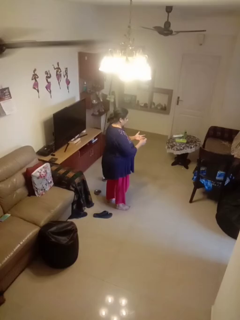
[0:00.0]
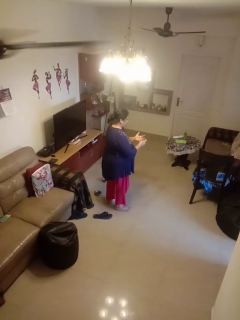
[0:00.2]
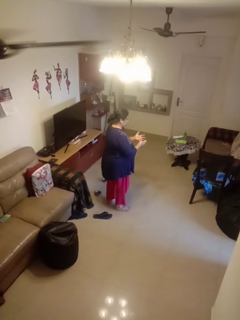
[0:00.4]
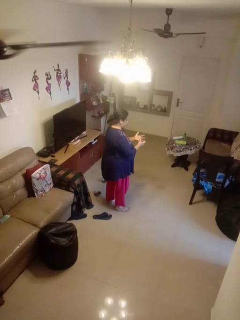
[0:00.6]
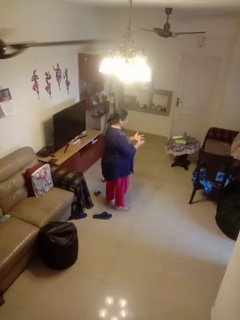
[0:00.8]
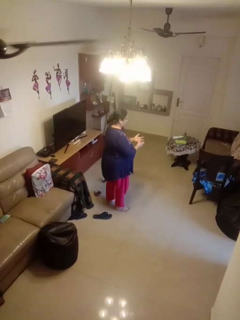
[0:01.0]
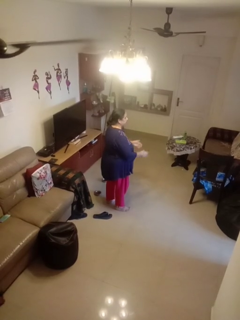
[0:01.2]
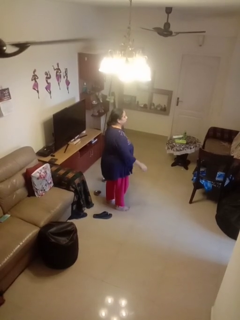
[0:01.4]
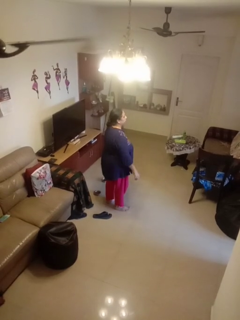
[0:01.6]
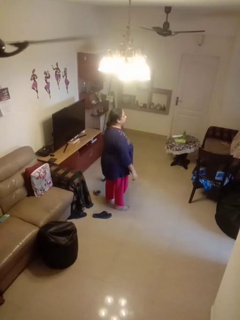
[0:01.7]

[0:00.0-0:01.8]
person puts on ring

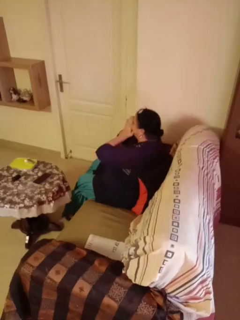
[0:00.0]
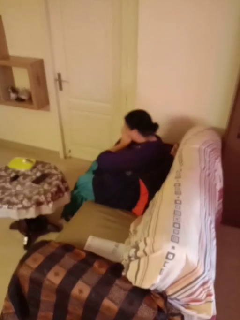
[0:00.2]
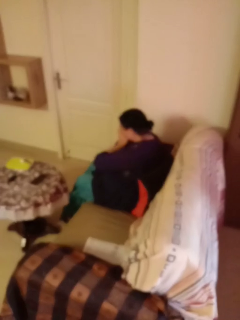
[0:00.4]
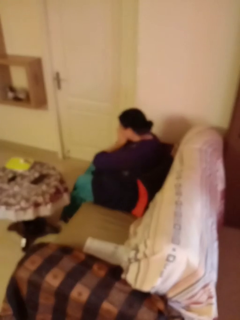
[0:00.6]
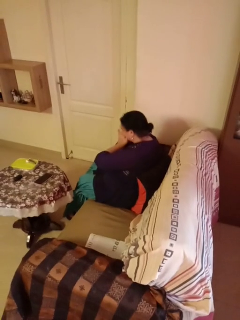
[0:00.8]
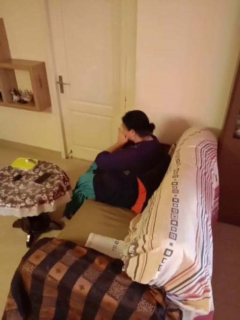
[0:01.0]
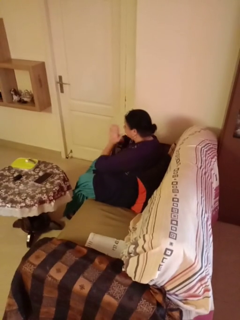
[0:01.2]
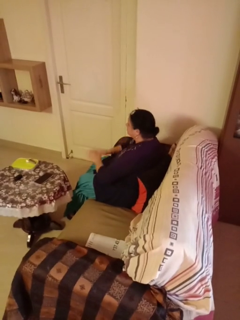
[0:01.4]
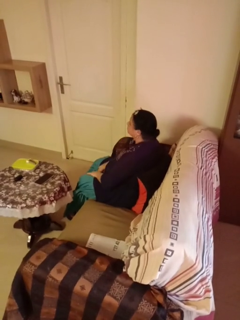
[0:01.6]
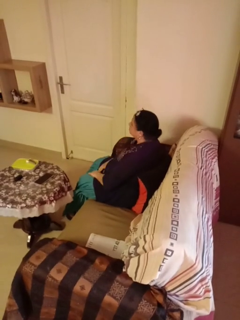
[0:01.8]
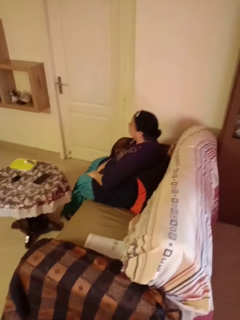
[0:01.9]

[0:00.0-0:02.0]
person sneezes into hand

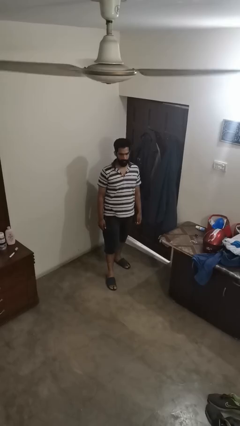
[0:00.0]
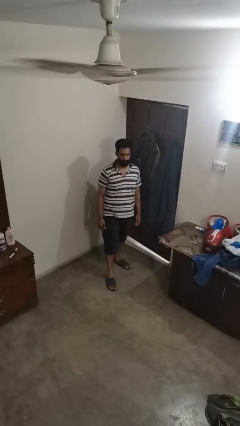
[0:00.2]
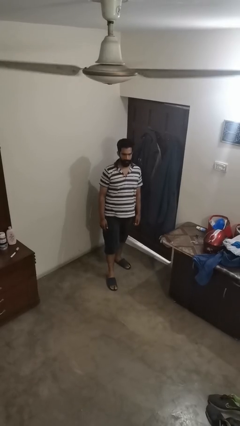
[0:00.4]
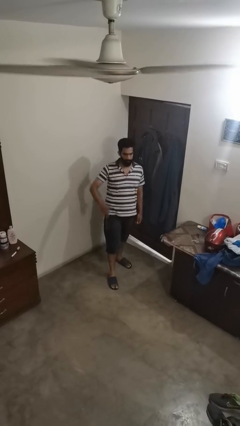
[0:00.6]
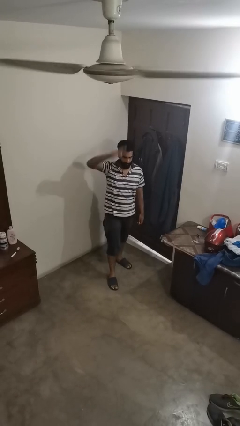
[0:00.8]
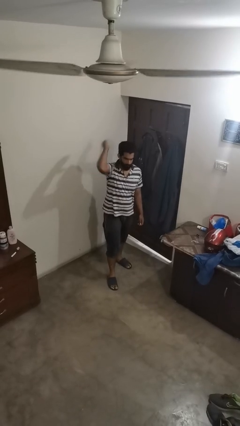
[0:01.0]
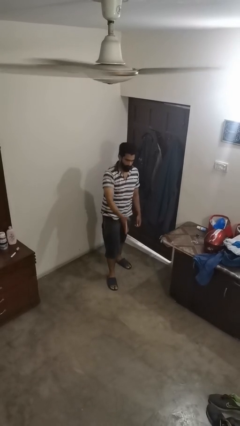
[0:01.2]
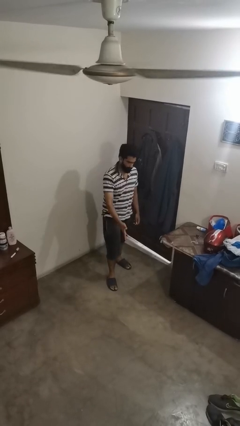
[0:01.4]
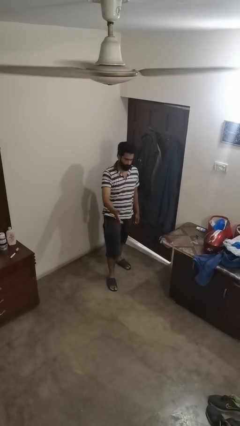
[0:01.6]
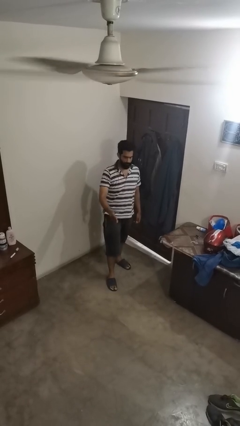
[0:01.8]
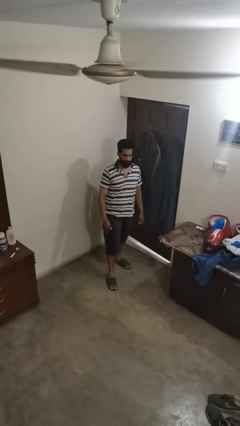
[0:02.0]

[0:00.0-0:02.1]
person karate chop

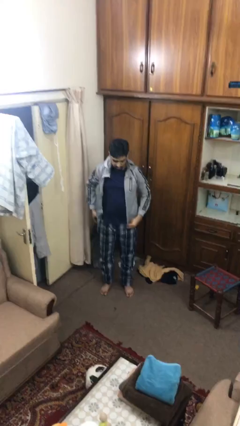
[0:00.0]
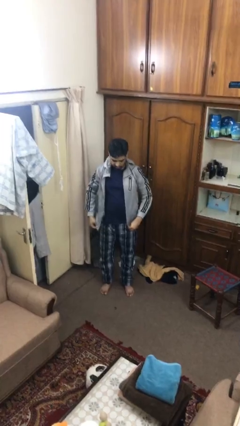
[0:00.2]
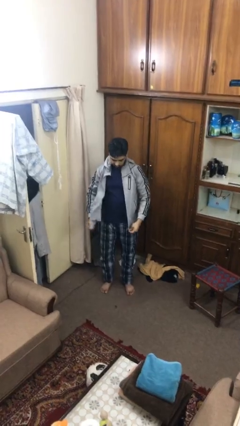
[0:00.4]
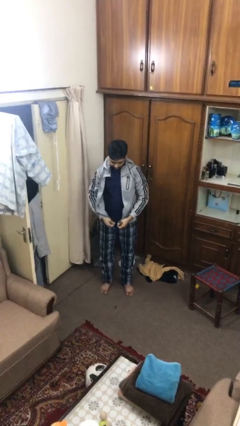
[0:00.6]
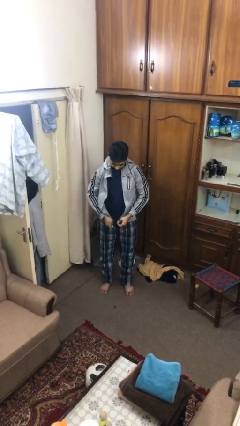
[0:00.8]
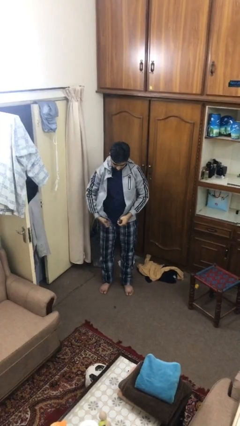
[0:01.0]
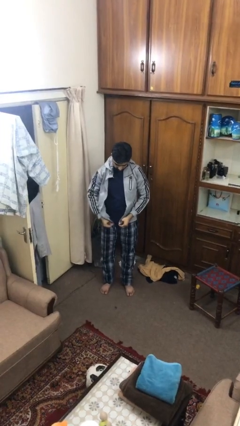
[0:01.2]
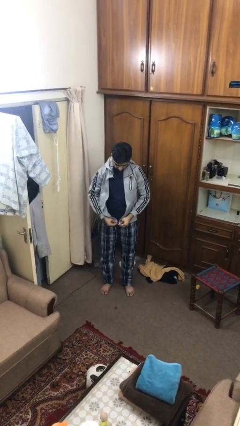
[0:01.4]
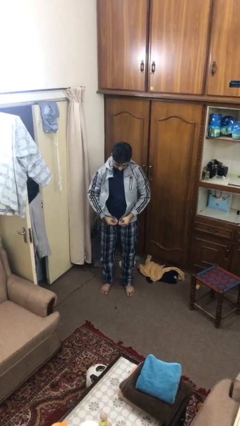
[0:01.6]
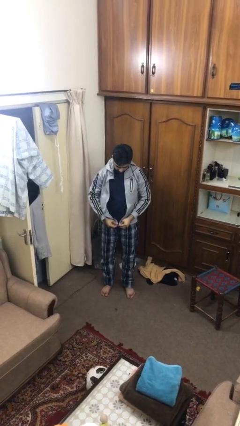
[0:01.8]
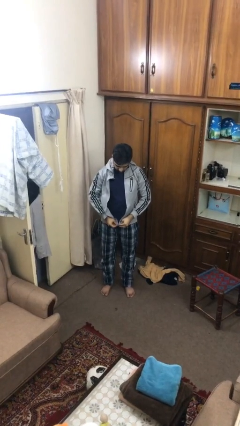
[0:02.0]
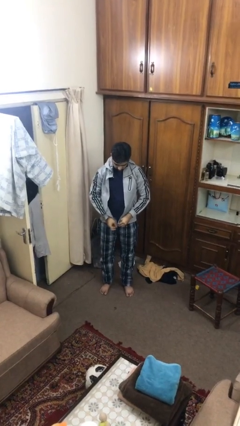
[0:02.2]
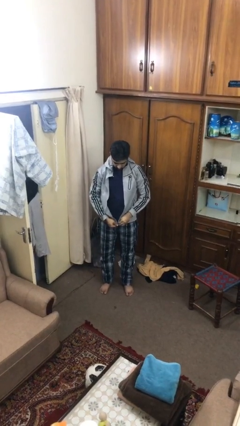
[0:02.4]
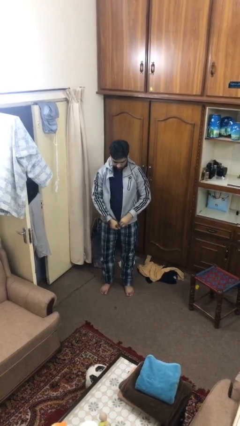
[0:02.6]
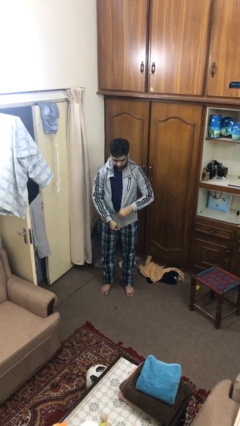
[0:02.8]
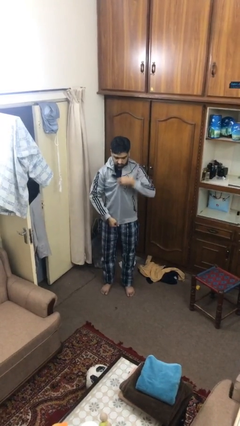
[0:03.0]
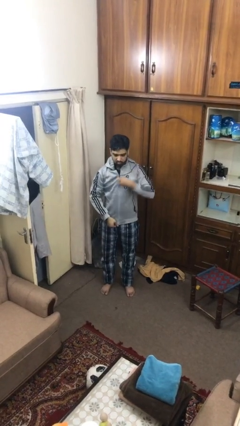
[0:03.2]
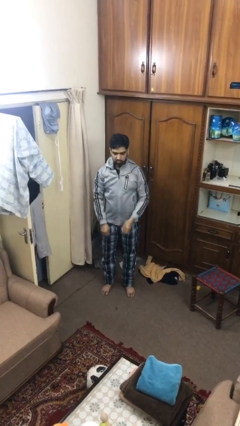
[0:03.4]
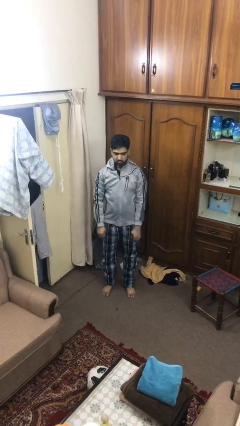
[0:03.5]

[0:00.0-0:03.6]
person zips up jacket

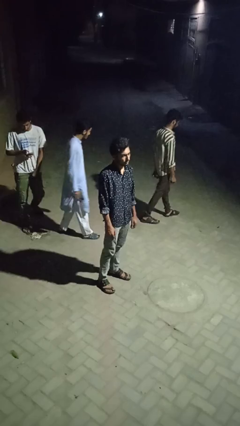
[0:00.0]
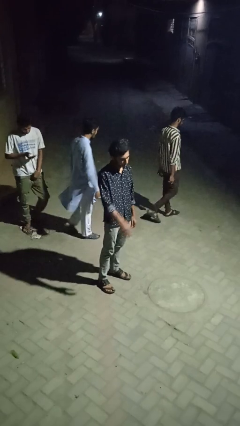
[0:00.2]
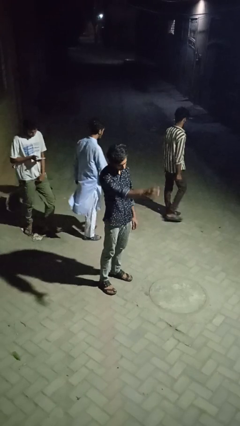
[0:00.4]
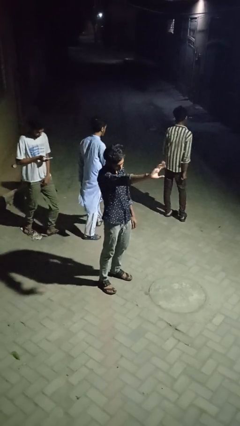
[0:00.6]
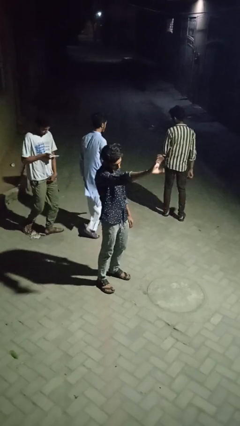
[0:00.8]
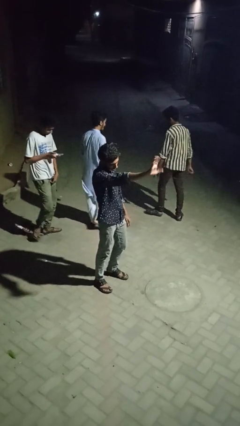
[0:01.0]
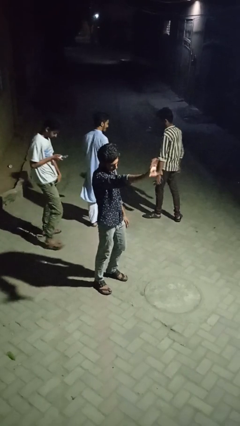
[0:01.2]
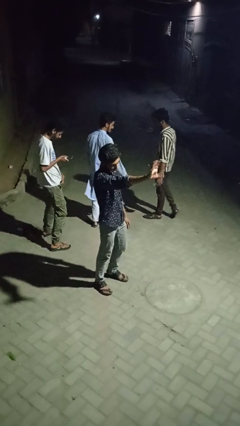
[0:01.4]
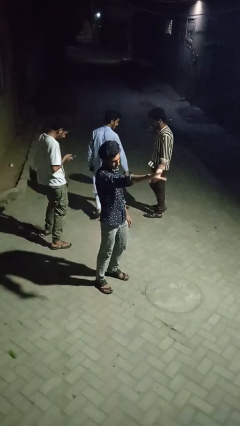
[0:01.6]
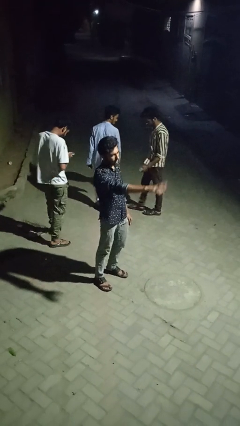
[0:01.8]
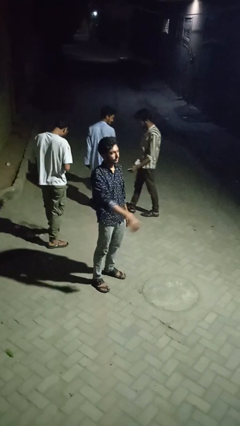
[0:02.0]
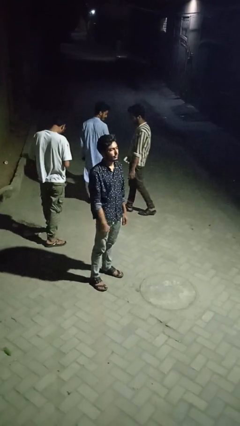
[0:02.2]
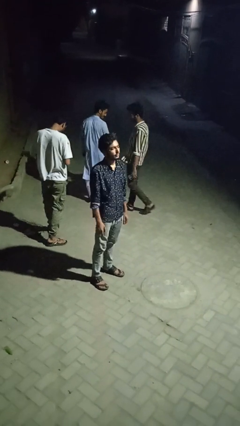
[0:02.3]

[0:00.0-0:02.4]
person waves at person

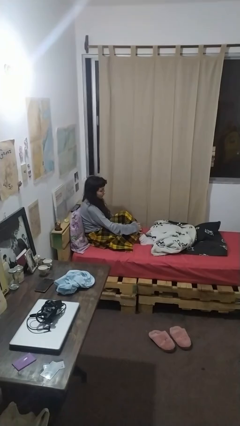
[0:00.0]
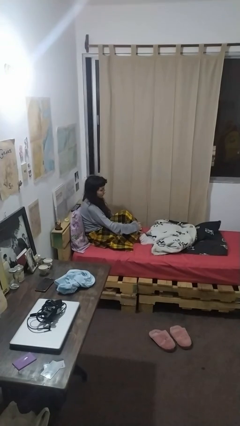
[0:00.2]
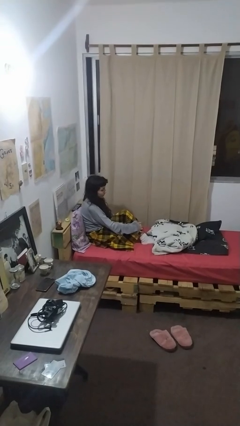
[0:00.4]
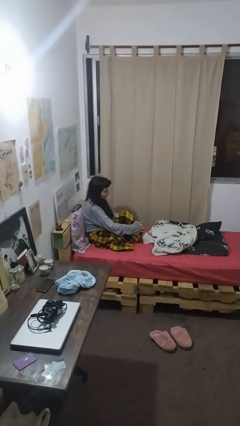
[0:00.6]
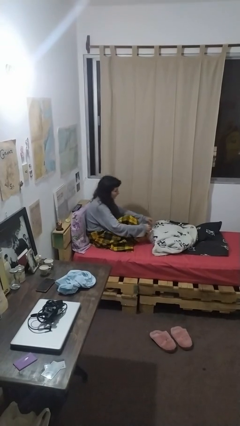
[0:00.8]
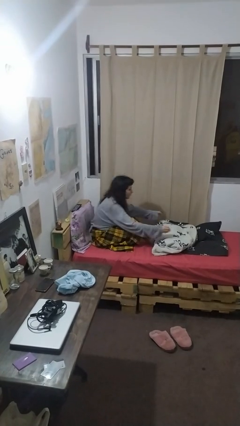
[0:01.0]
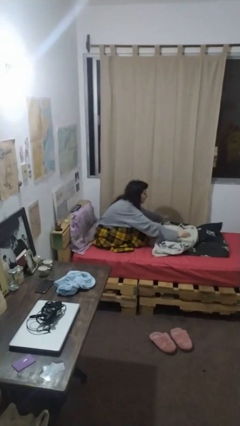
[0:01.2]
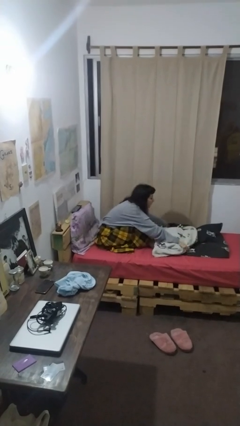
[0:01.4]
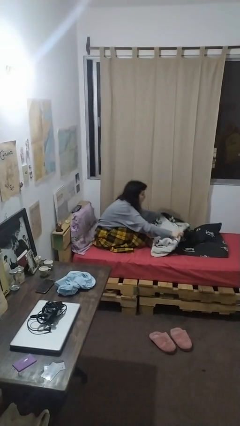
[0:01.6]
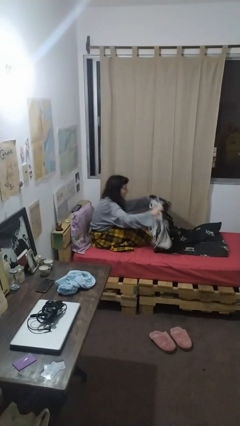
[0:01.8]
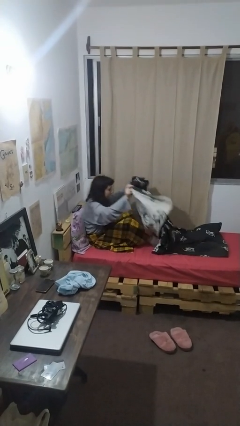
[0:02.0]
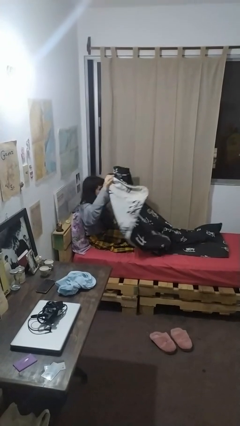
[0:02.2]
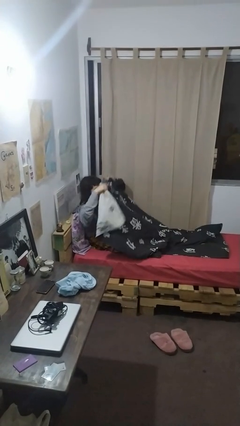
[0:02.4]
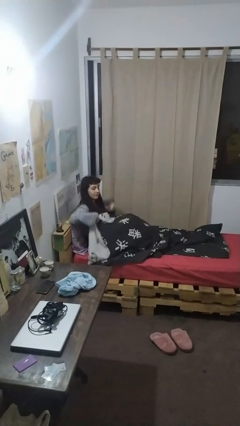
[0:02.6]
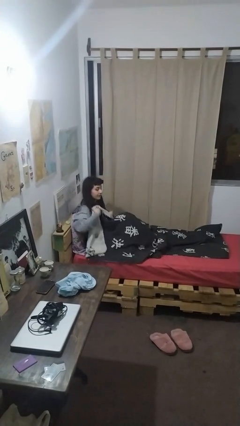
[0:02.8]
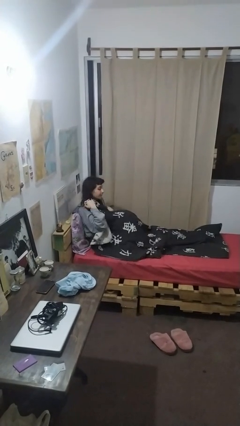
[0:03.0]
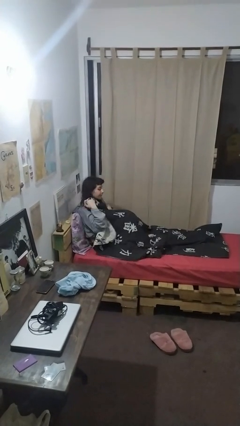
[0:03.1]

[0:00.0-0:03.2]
person covers with blanket

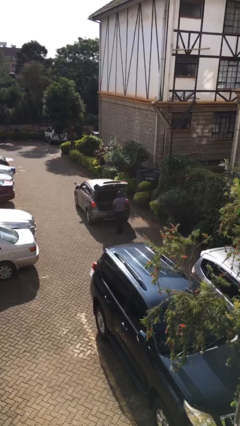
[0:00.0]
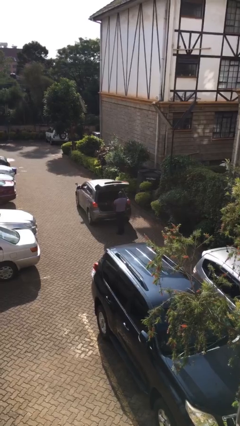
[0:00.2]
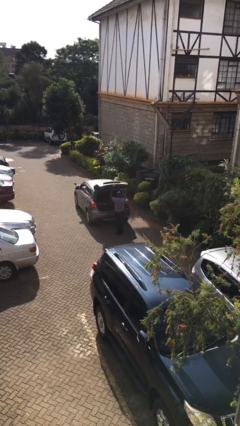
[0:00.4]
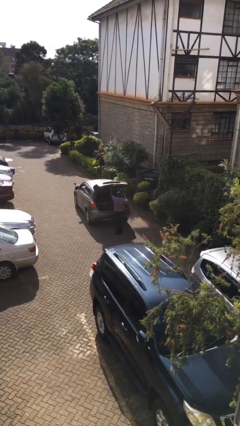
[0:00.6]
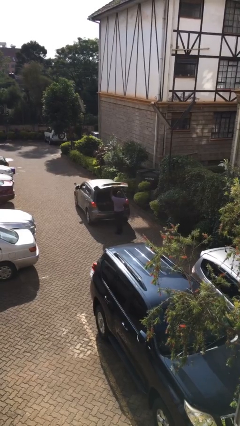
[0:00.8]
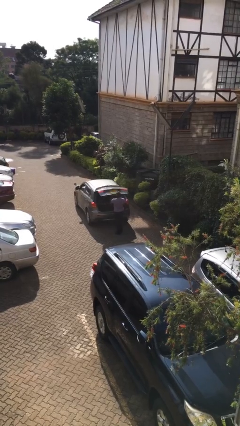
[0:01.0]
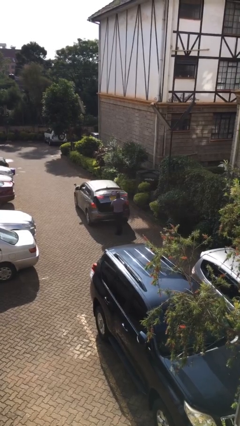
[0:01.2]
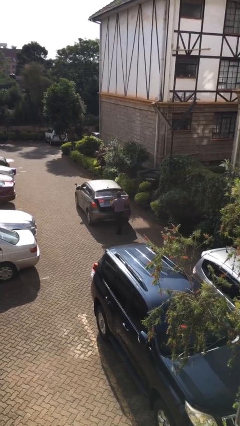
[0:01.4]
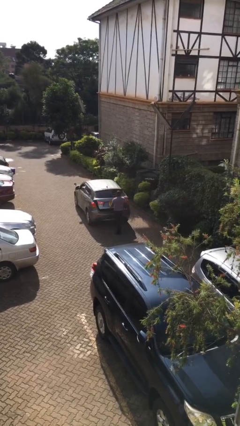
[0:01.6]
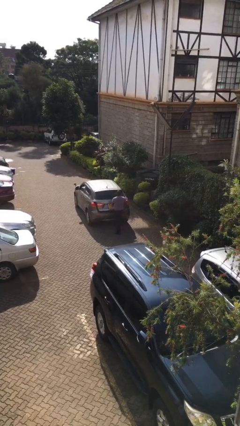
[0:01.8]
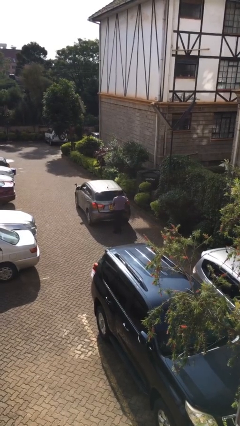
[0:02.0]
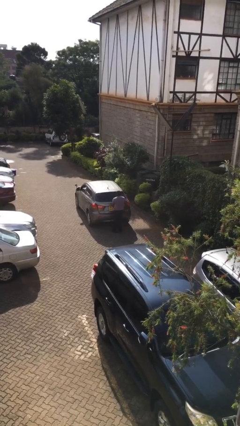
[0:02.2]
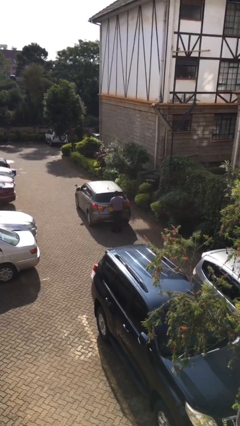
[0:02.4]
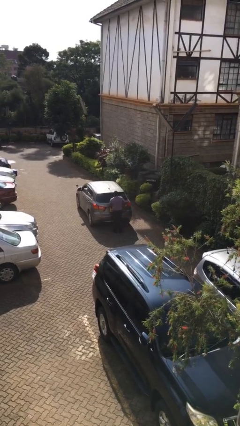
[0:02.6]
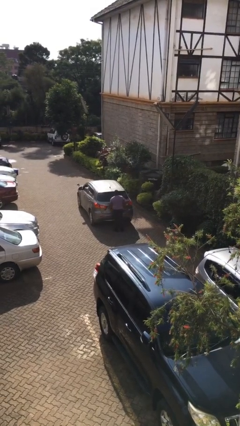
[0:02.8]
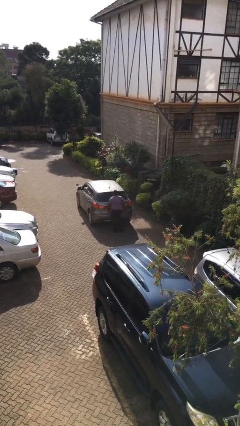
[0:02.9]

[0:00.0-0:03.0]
person closes car trunk
